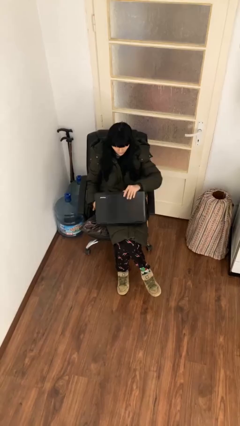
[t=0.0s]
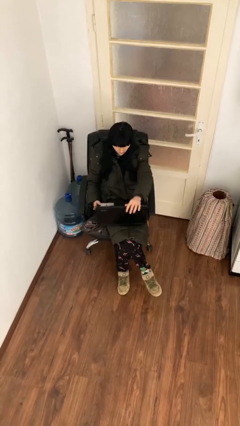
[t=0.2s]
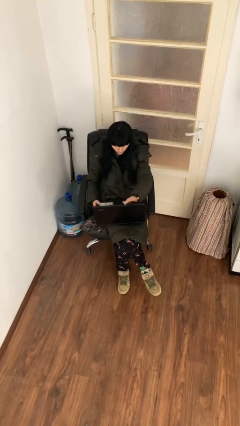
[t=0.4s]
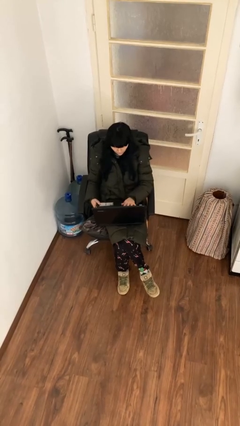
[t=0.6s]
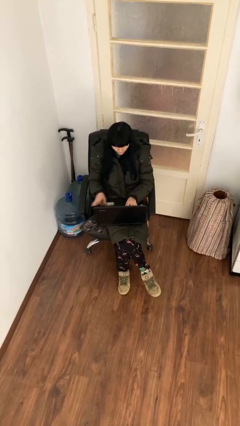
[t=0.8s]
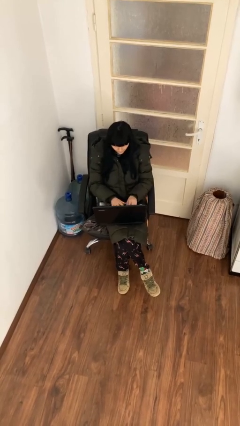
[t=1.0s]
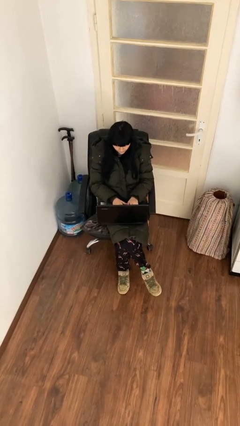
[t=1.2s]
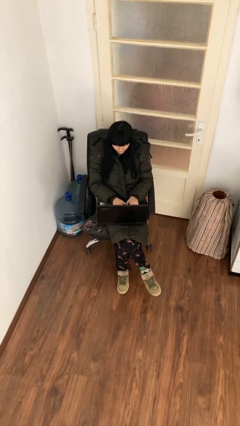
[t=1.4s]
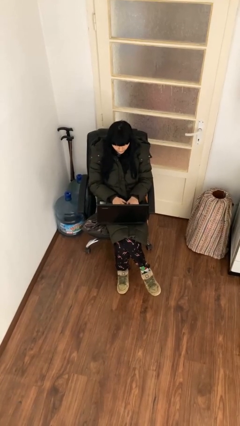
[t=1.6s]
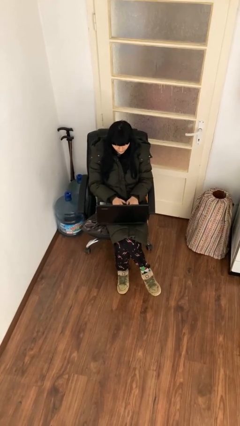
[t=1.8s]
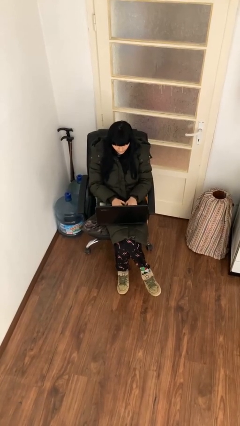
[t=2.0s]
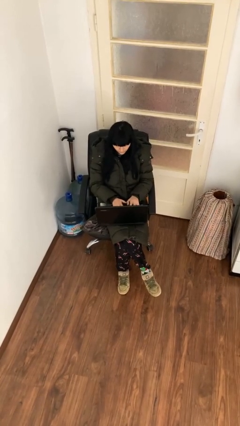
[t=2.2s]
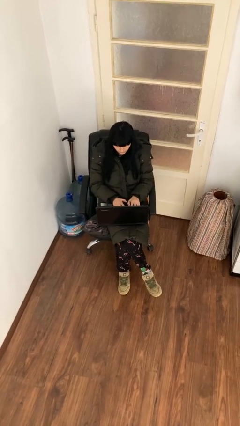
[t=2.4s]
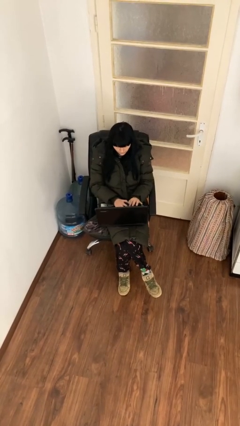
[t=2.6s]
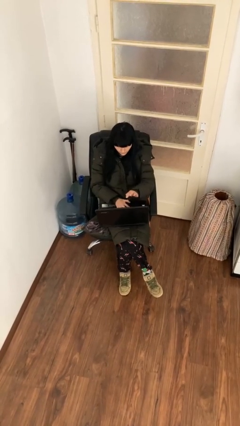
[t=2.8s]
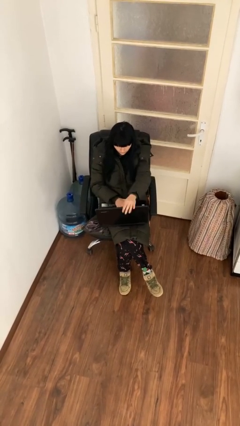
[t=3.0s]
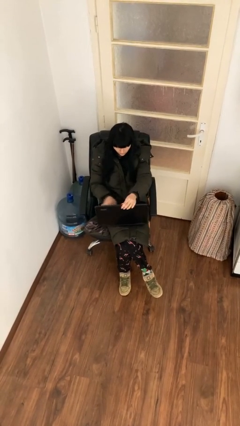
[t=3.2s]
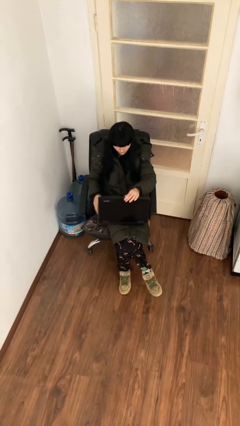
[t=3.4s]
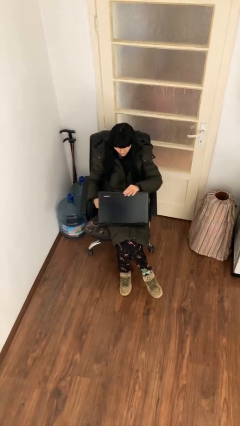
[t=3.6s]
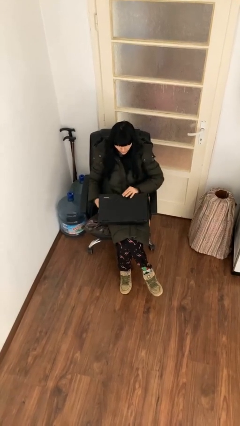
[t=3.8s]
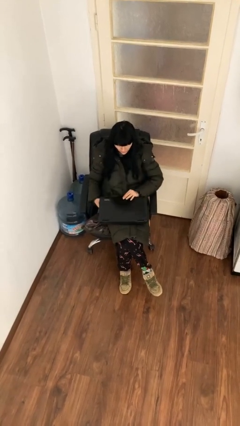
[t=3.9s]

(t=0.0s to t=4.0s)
person interacts with laptop

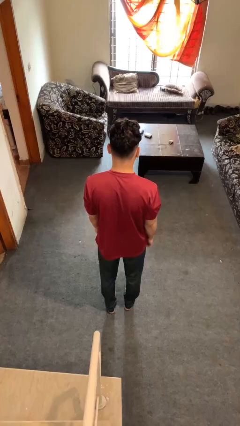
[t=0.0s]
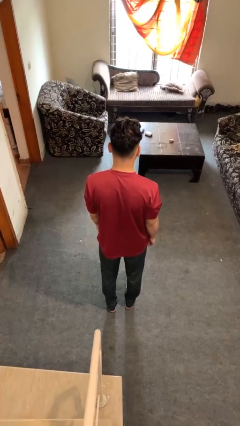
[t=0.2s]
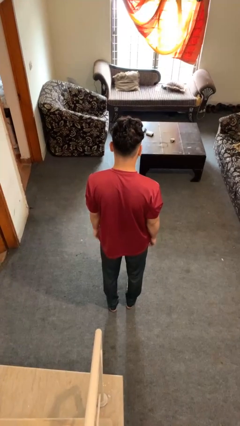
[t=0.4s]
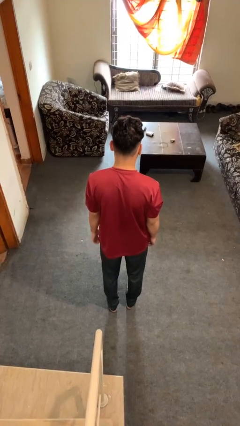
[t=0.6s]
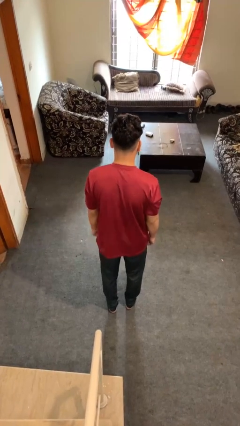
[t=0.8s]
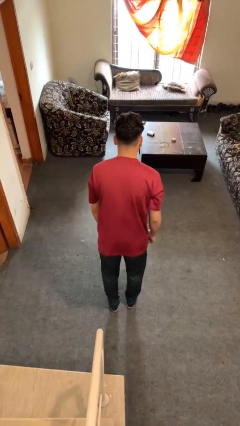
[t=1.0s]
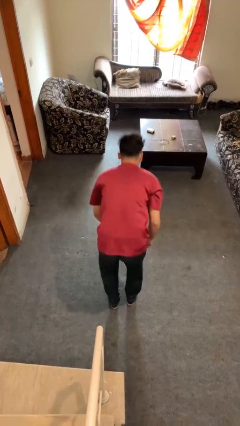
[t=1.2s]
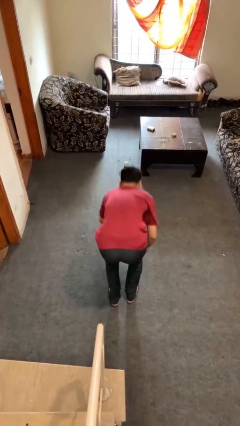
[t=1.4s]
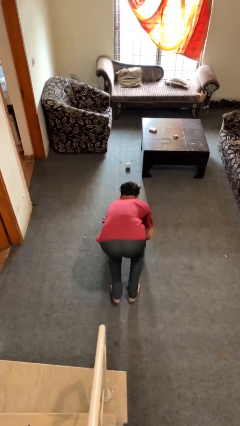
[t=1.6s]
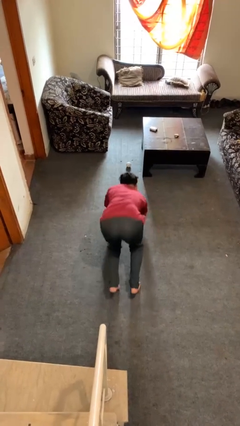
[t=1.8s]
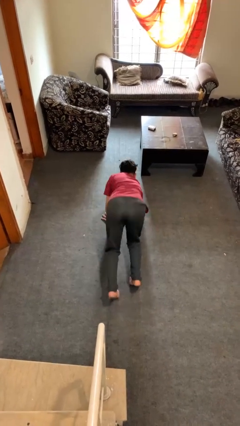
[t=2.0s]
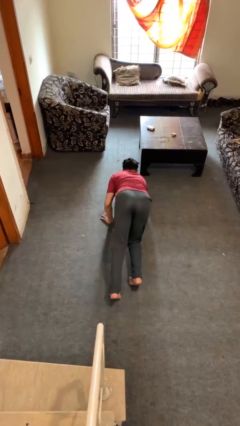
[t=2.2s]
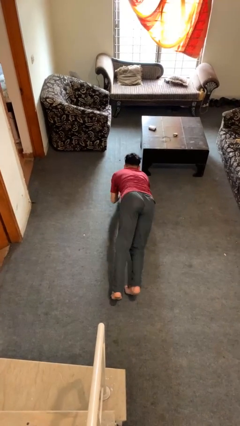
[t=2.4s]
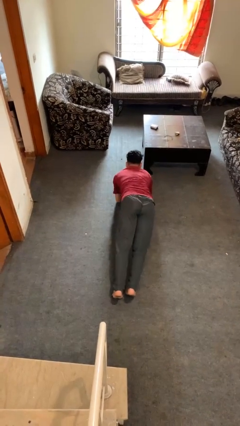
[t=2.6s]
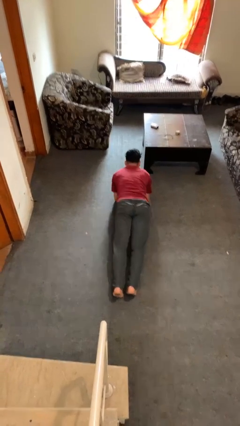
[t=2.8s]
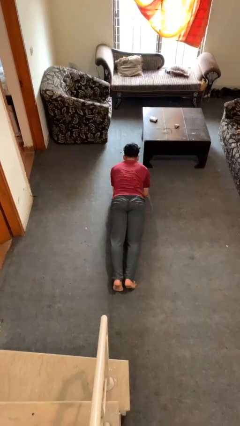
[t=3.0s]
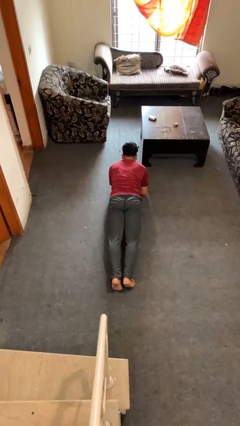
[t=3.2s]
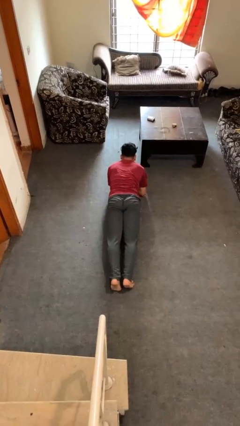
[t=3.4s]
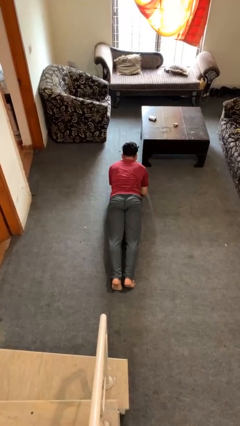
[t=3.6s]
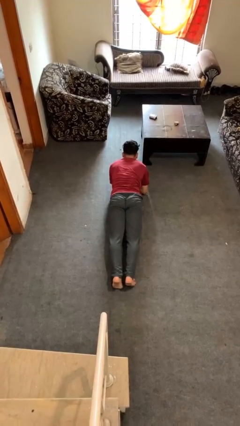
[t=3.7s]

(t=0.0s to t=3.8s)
person exercises with plank

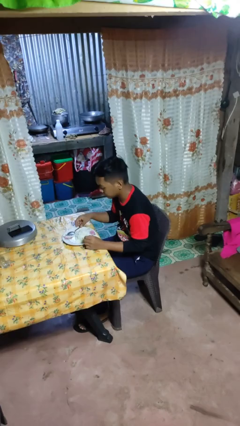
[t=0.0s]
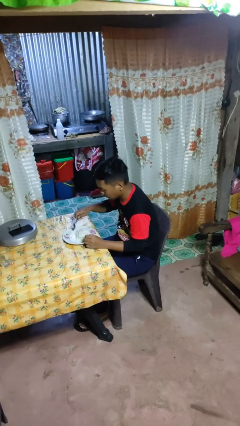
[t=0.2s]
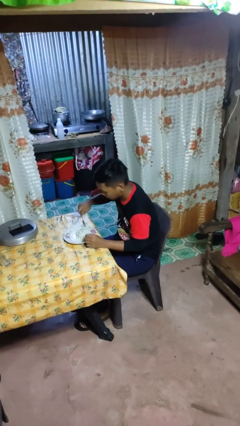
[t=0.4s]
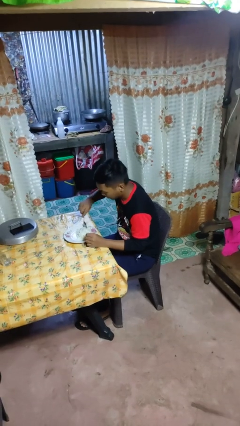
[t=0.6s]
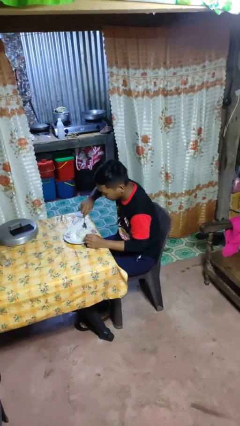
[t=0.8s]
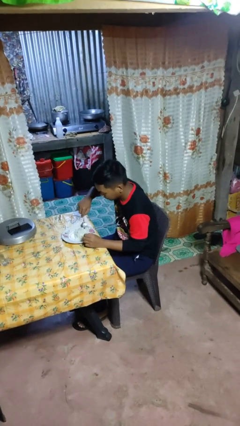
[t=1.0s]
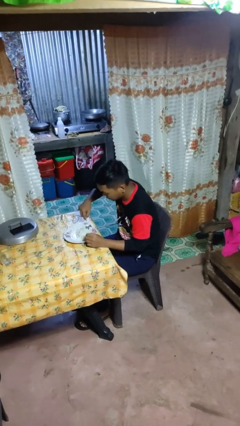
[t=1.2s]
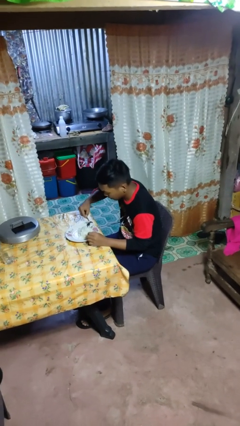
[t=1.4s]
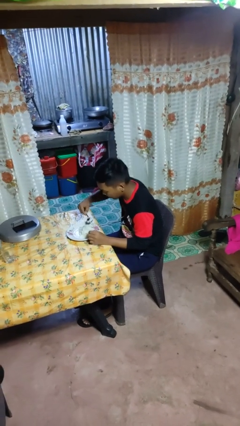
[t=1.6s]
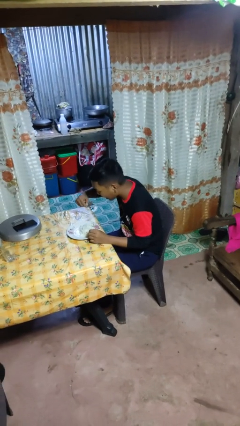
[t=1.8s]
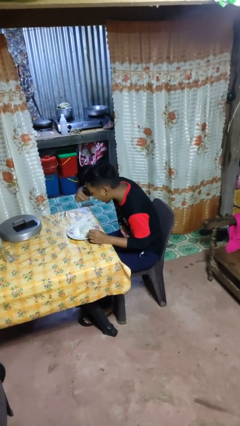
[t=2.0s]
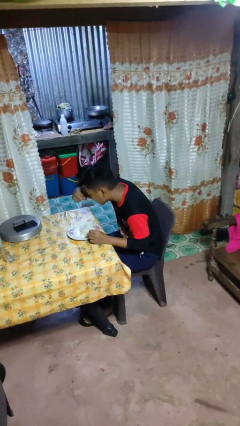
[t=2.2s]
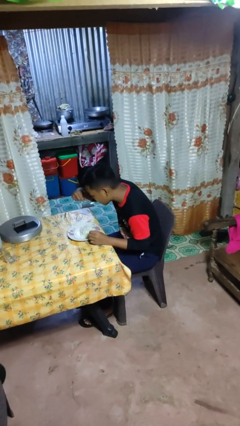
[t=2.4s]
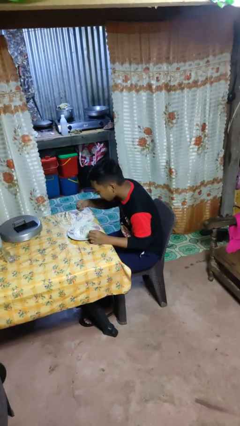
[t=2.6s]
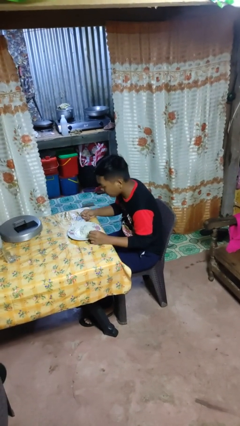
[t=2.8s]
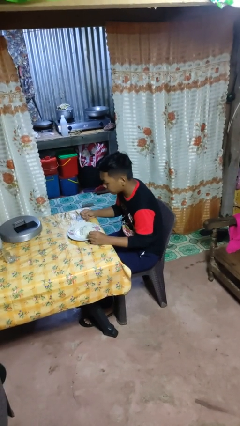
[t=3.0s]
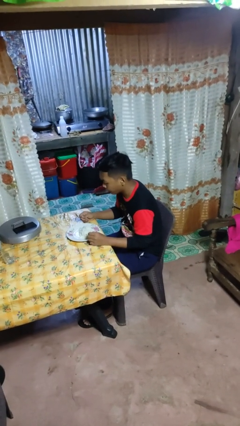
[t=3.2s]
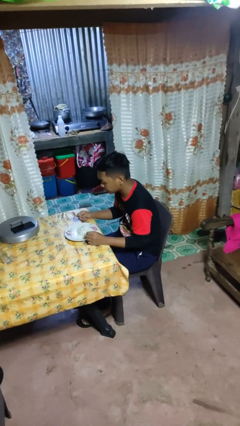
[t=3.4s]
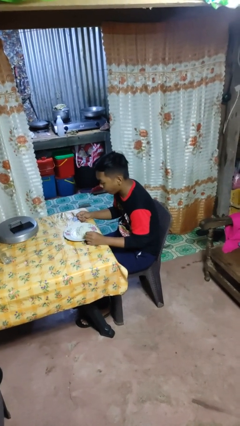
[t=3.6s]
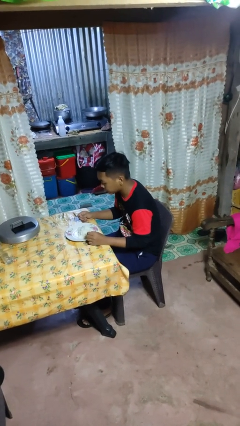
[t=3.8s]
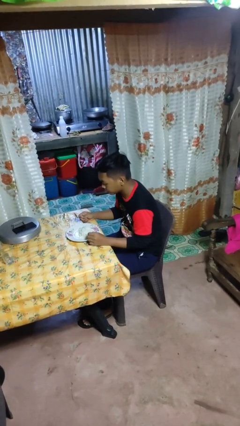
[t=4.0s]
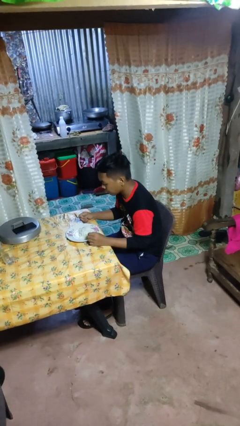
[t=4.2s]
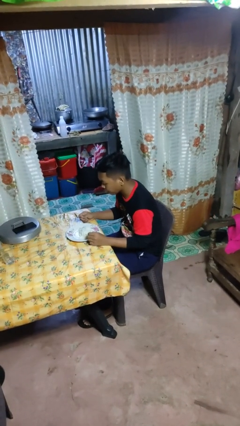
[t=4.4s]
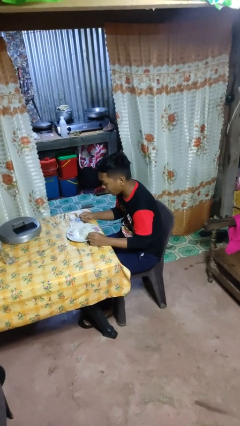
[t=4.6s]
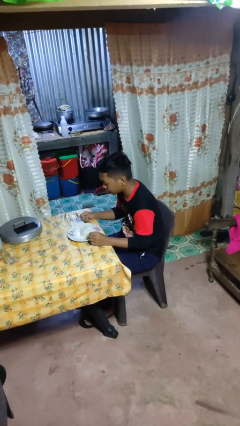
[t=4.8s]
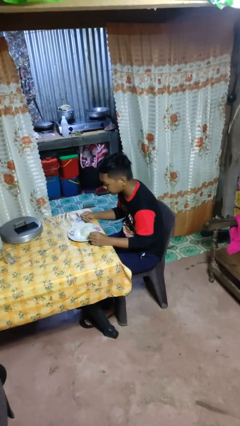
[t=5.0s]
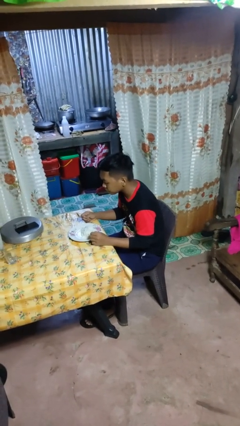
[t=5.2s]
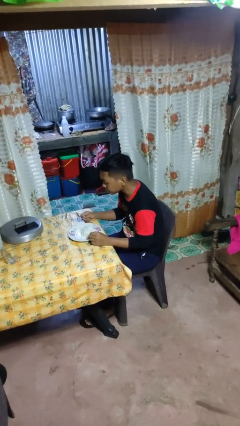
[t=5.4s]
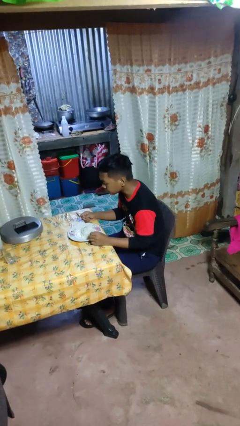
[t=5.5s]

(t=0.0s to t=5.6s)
person eats with utensil

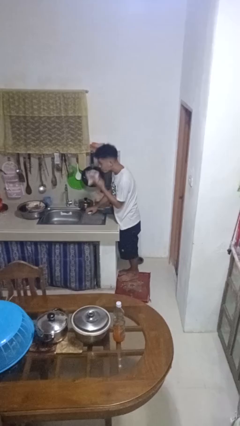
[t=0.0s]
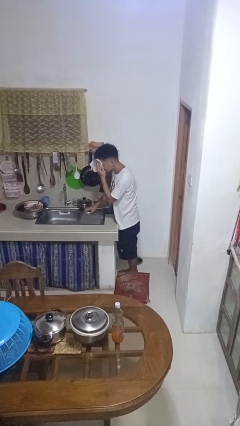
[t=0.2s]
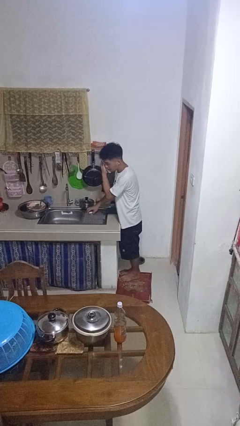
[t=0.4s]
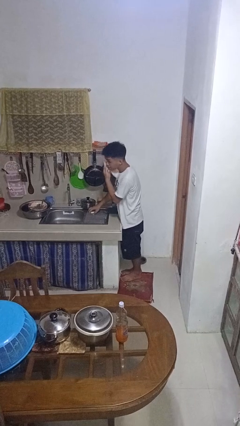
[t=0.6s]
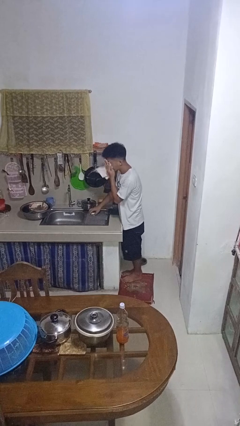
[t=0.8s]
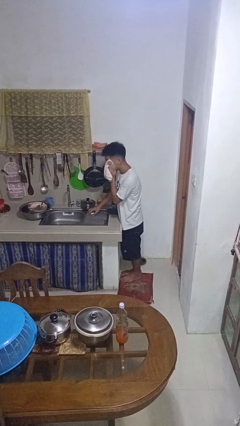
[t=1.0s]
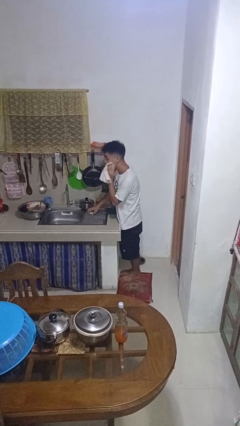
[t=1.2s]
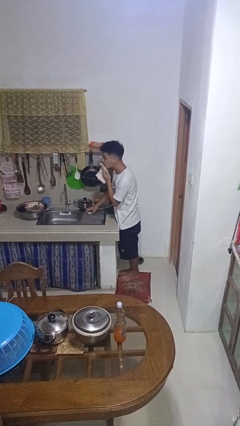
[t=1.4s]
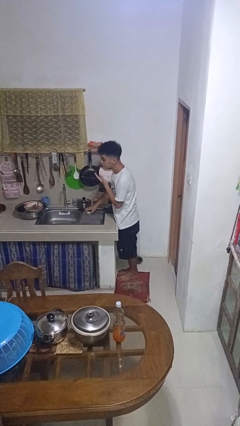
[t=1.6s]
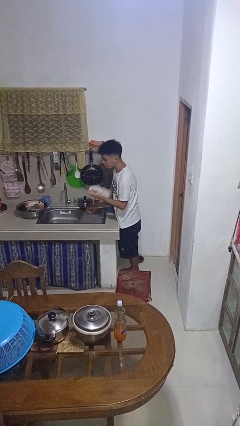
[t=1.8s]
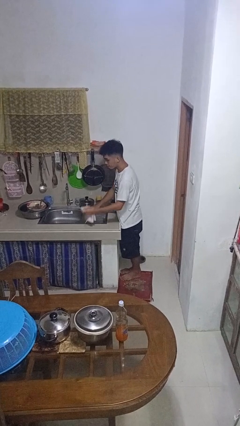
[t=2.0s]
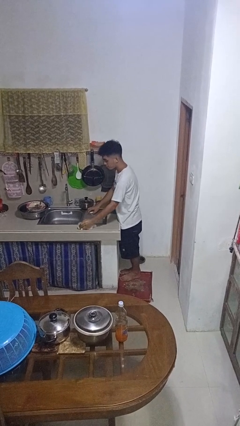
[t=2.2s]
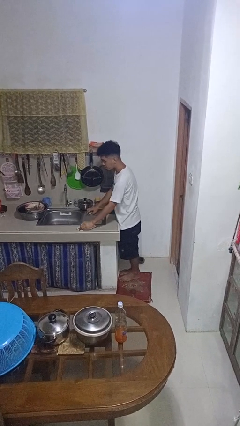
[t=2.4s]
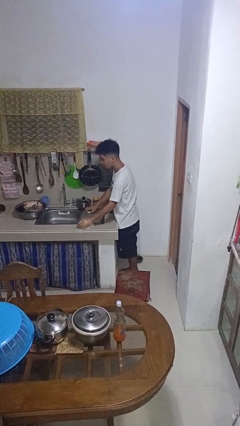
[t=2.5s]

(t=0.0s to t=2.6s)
person dries face with towel

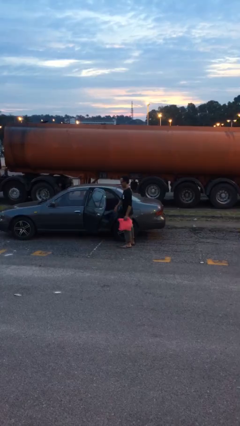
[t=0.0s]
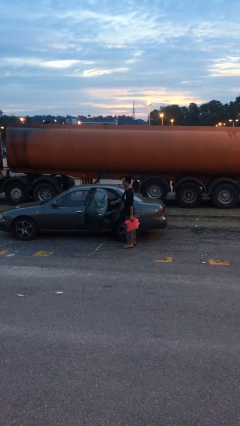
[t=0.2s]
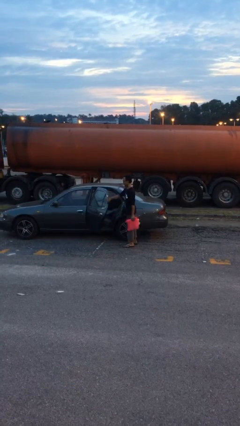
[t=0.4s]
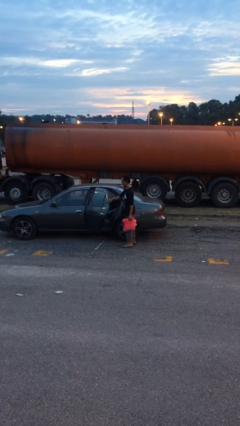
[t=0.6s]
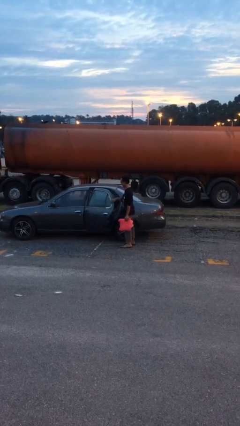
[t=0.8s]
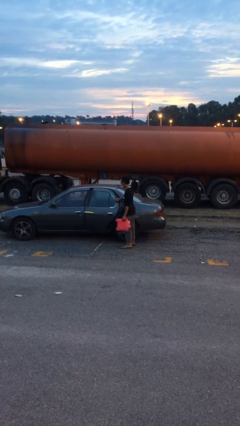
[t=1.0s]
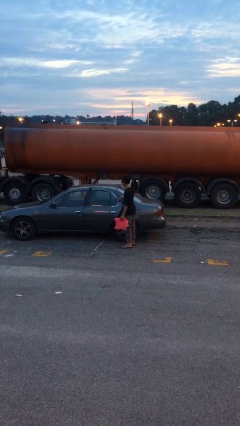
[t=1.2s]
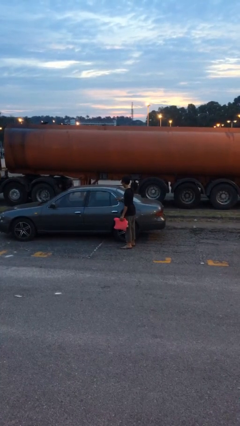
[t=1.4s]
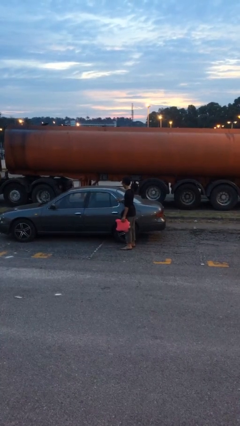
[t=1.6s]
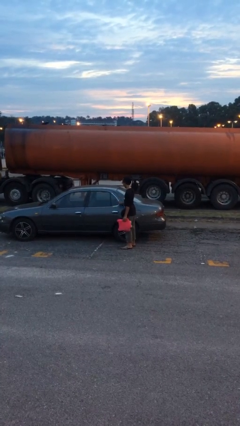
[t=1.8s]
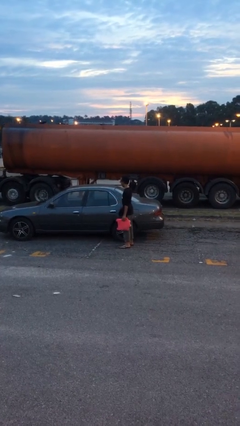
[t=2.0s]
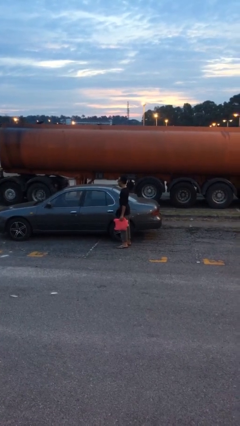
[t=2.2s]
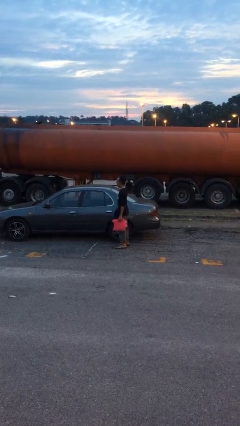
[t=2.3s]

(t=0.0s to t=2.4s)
person closes car door
